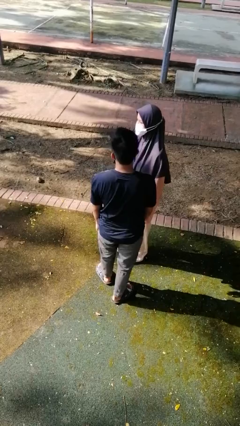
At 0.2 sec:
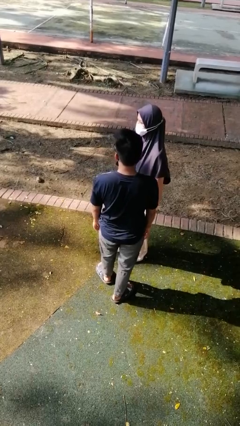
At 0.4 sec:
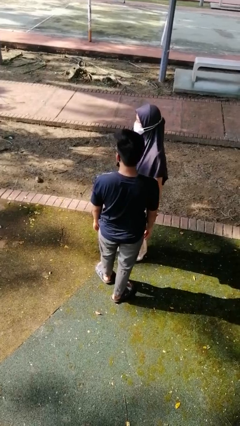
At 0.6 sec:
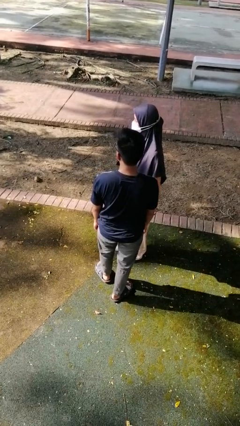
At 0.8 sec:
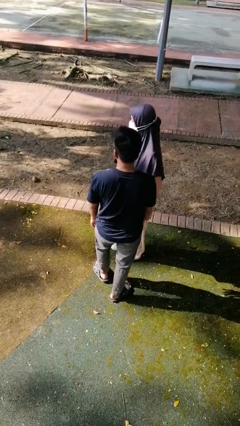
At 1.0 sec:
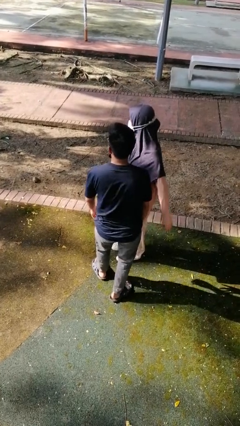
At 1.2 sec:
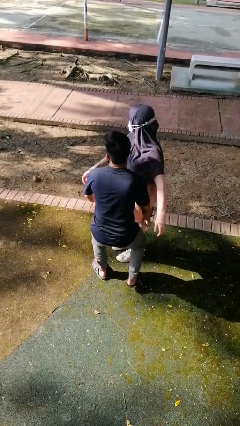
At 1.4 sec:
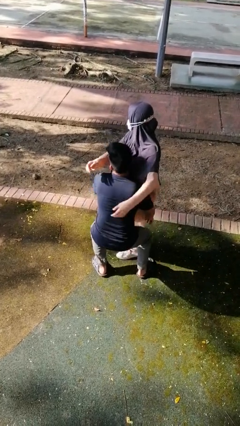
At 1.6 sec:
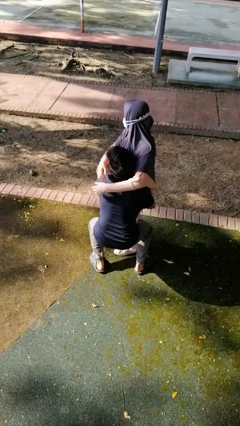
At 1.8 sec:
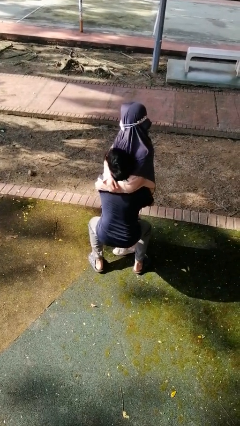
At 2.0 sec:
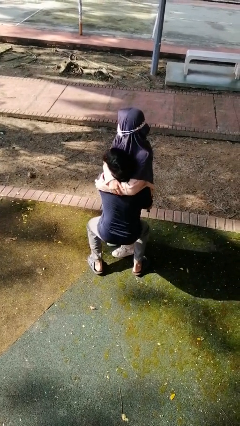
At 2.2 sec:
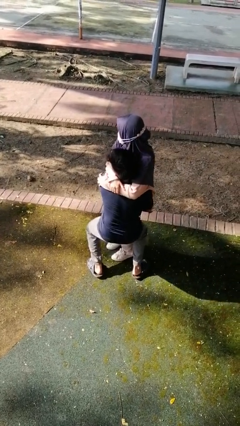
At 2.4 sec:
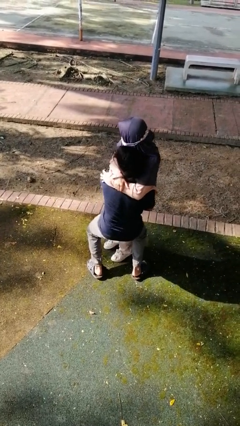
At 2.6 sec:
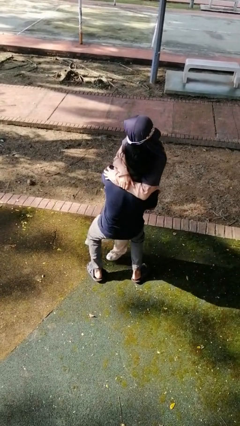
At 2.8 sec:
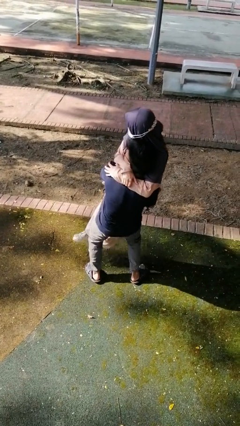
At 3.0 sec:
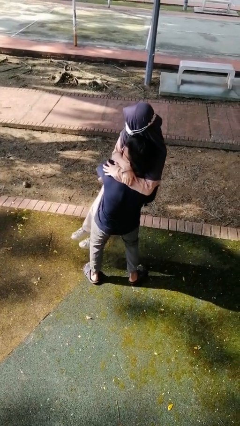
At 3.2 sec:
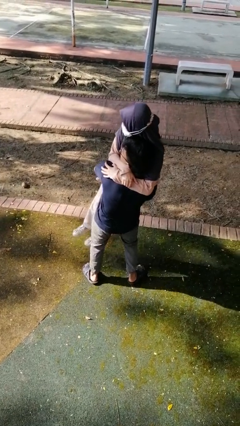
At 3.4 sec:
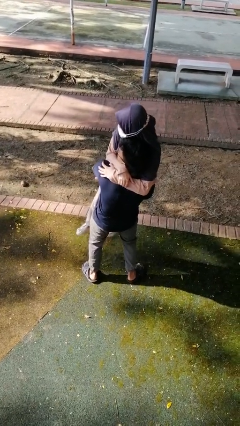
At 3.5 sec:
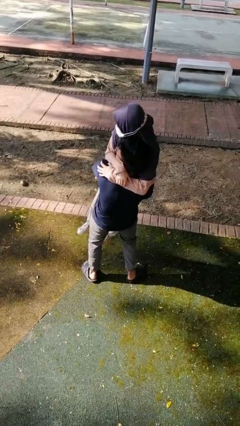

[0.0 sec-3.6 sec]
person picks up person

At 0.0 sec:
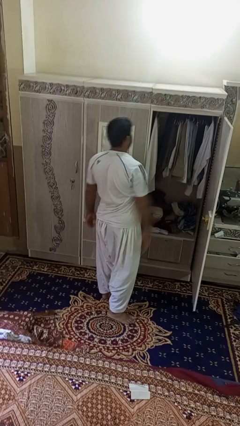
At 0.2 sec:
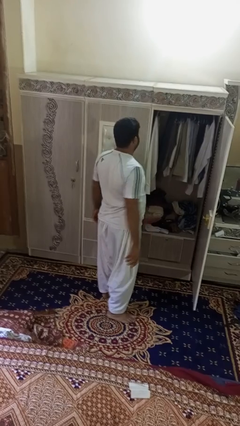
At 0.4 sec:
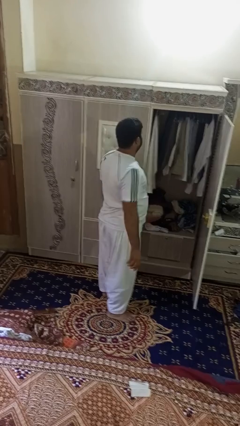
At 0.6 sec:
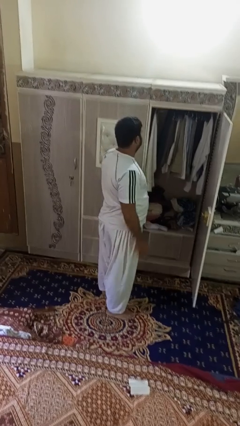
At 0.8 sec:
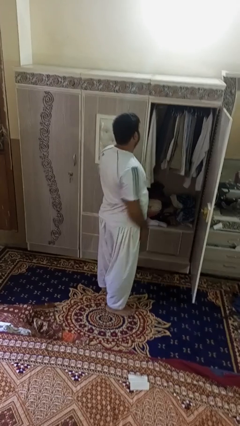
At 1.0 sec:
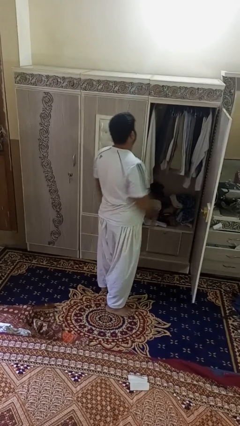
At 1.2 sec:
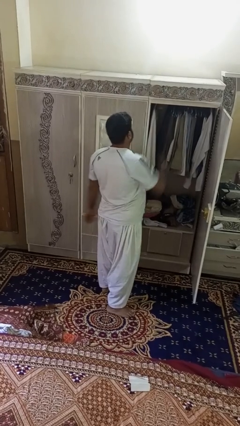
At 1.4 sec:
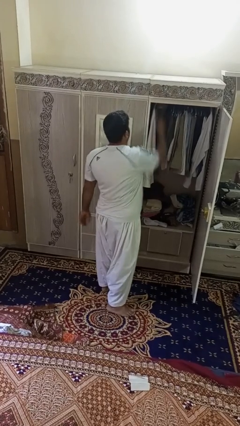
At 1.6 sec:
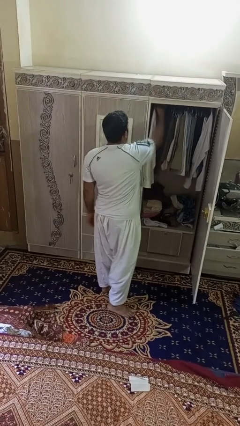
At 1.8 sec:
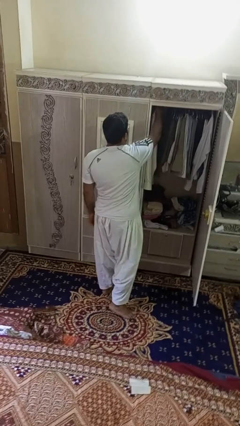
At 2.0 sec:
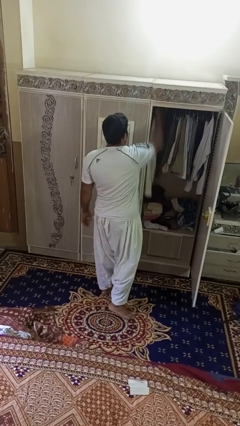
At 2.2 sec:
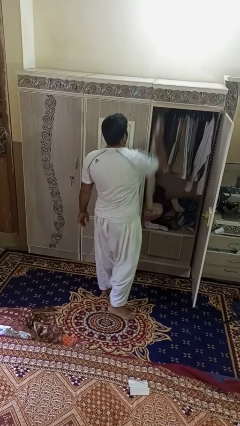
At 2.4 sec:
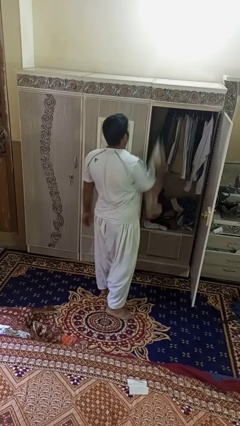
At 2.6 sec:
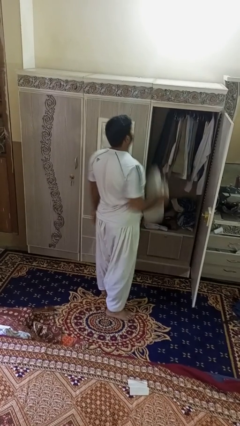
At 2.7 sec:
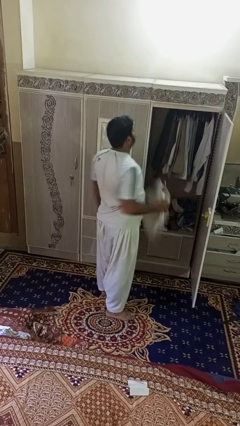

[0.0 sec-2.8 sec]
person takes clothes from closet

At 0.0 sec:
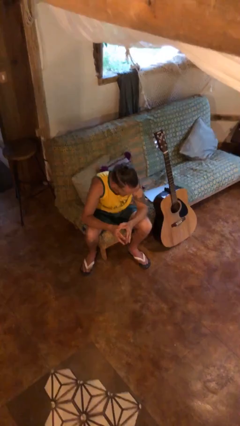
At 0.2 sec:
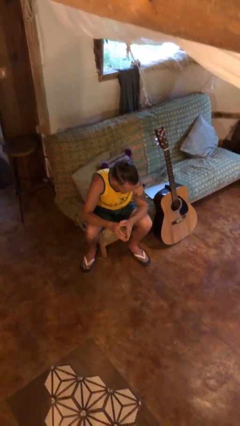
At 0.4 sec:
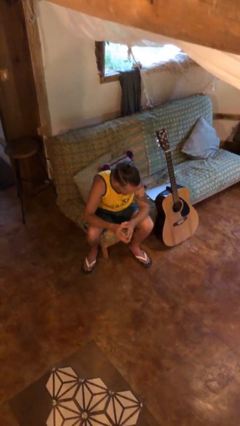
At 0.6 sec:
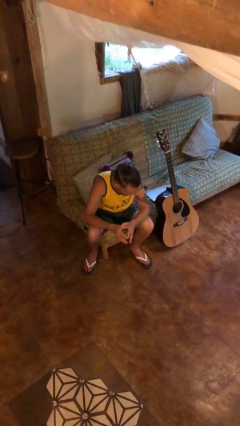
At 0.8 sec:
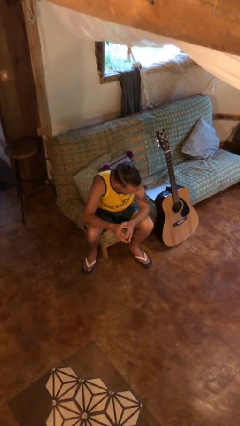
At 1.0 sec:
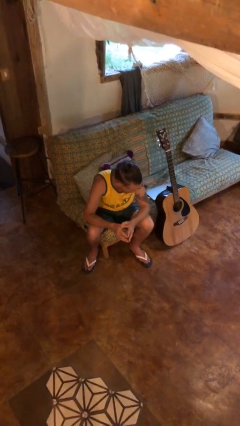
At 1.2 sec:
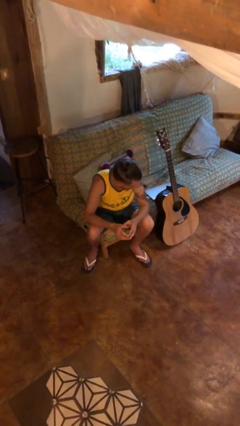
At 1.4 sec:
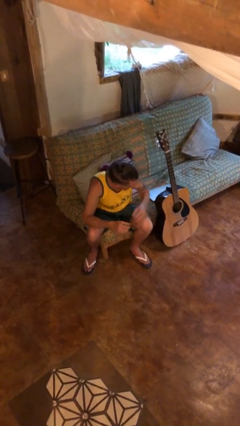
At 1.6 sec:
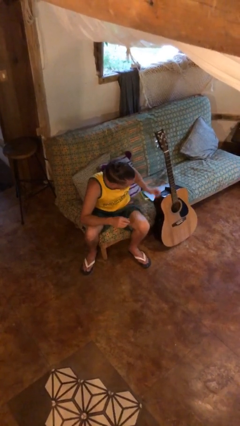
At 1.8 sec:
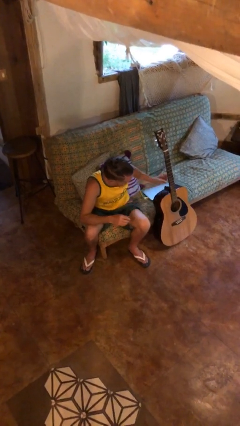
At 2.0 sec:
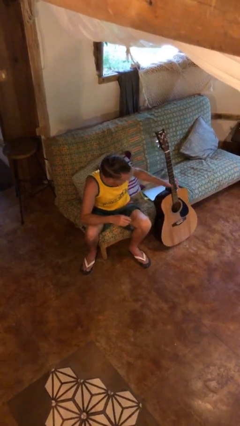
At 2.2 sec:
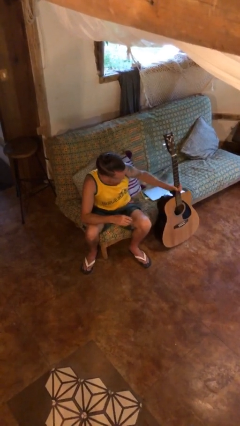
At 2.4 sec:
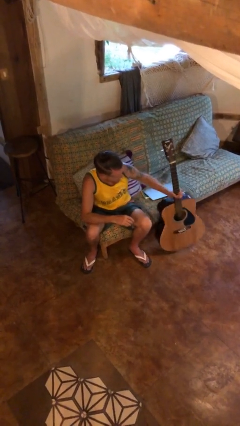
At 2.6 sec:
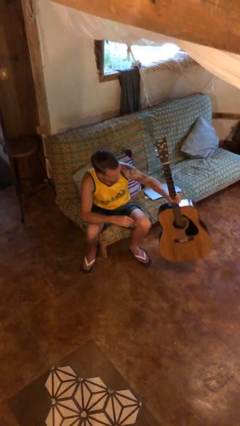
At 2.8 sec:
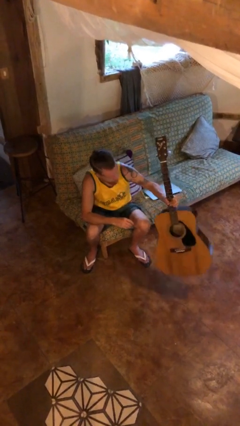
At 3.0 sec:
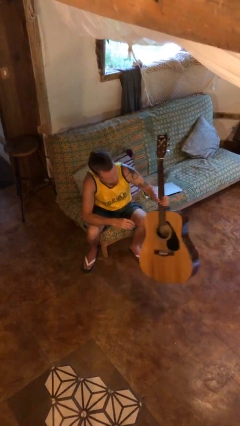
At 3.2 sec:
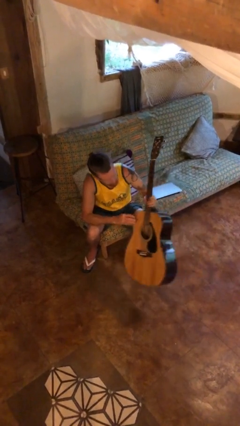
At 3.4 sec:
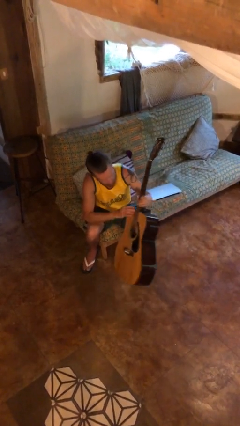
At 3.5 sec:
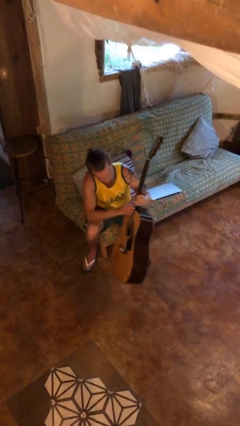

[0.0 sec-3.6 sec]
person picks up object from floor

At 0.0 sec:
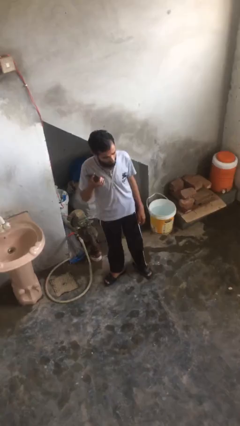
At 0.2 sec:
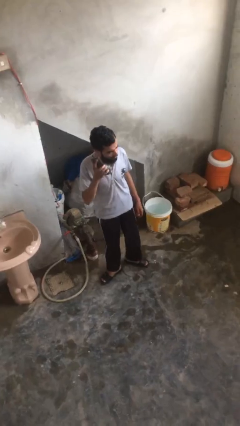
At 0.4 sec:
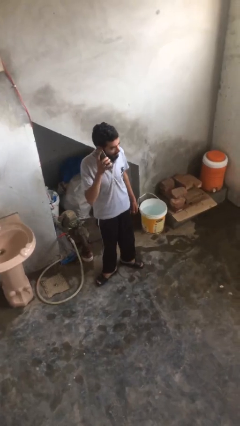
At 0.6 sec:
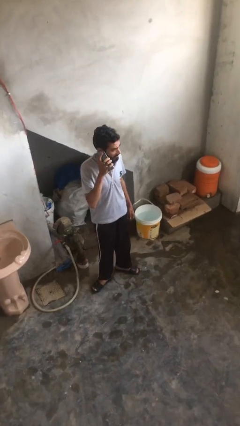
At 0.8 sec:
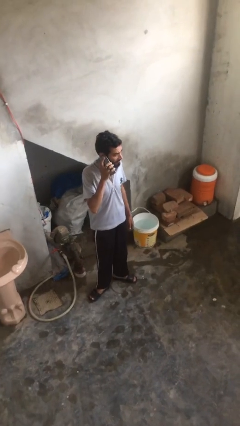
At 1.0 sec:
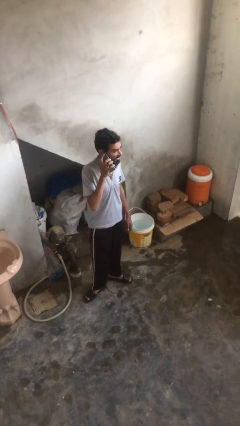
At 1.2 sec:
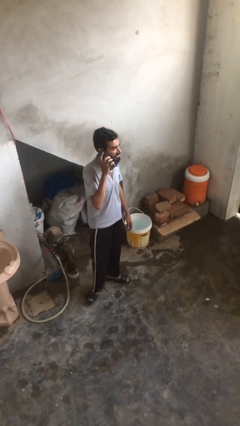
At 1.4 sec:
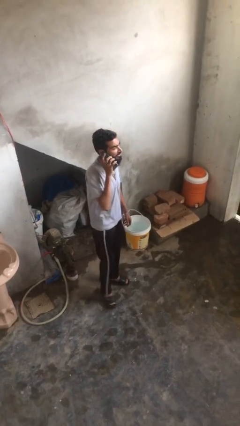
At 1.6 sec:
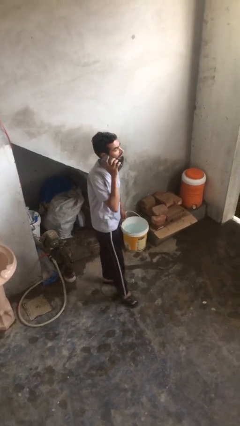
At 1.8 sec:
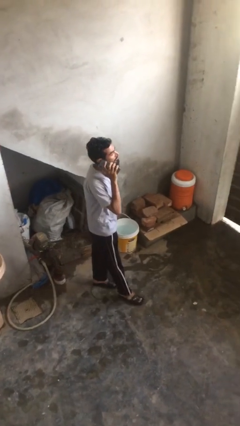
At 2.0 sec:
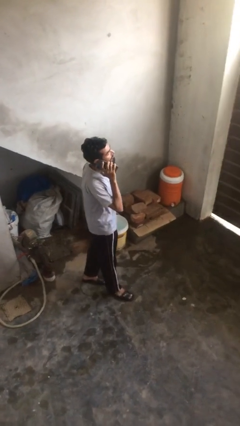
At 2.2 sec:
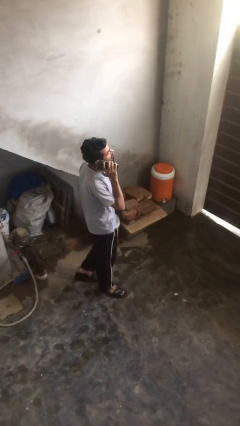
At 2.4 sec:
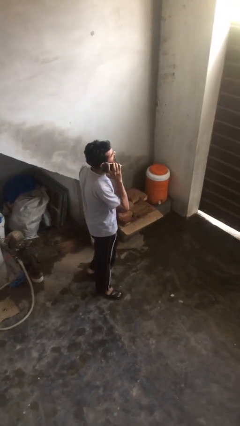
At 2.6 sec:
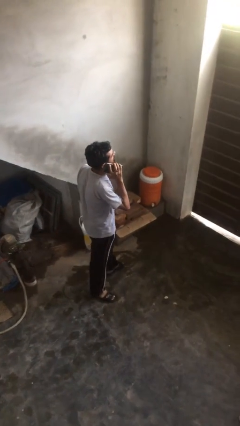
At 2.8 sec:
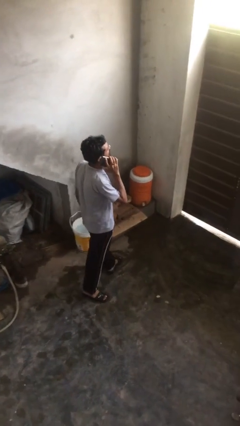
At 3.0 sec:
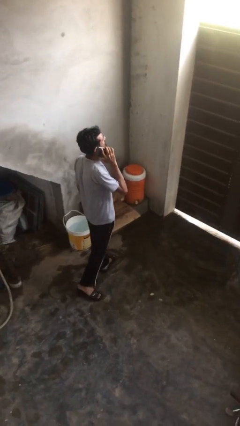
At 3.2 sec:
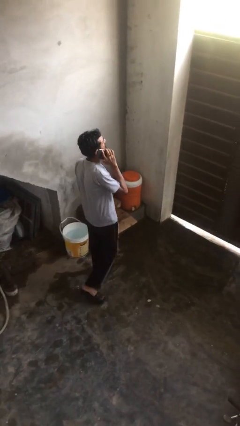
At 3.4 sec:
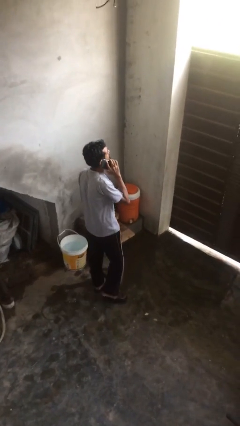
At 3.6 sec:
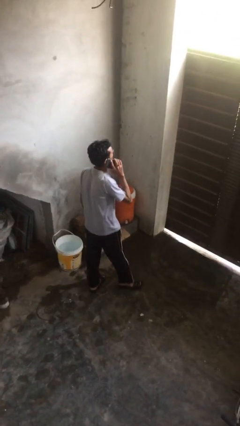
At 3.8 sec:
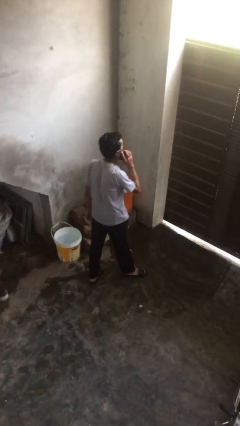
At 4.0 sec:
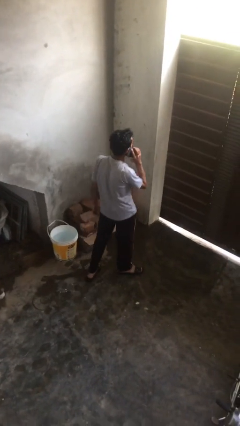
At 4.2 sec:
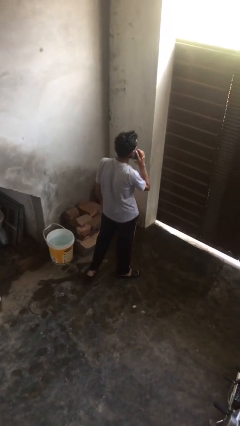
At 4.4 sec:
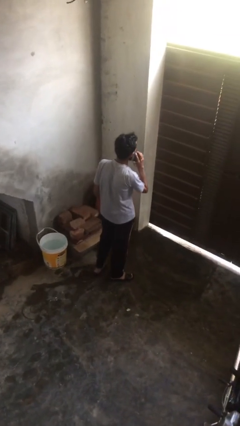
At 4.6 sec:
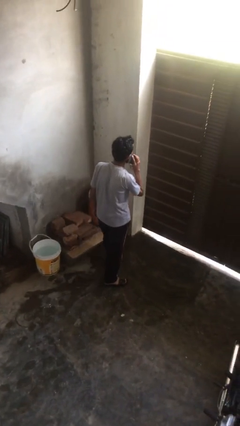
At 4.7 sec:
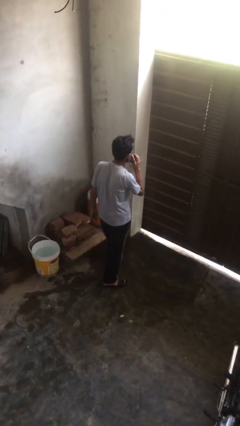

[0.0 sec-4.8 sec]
person talks on phone

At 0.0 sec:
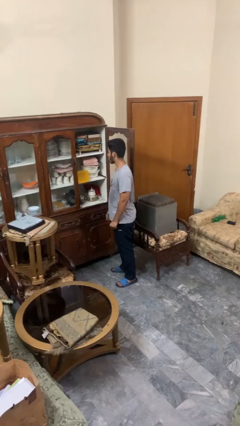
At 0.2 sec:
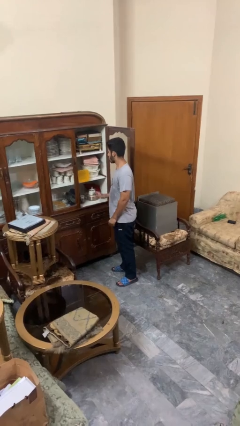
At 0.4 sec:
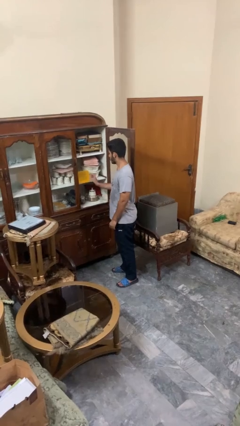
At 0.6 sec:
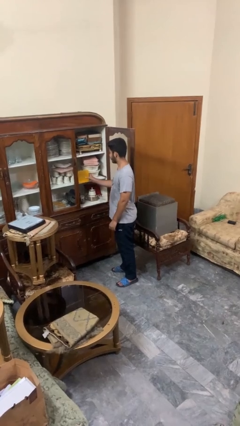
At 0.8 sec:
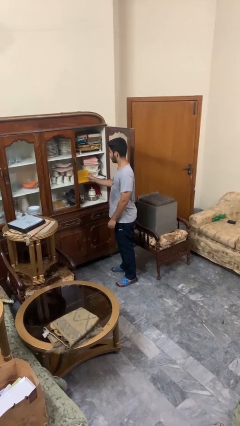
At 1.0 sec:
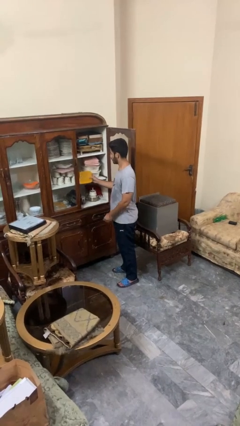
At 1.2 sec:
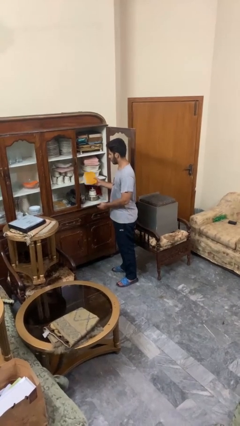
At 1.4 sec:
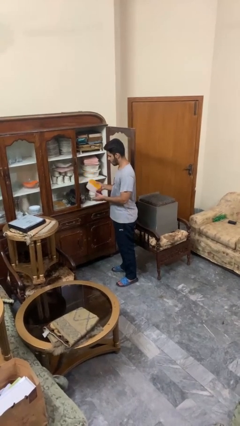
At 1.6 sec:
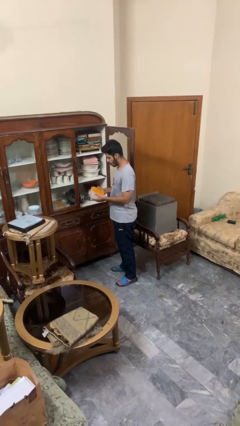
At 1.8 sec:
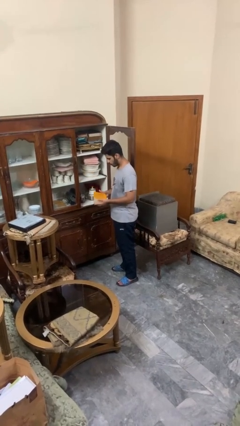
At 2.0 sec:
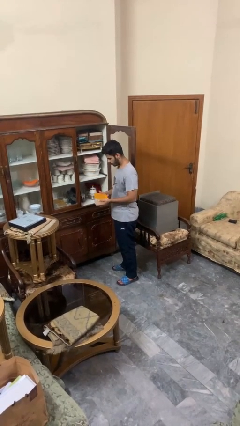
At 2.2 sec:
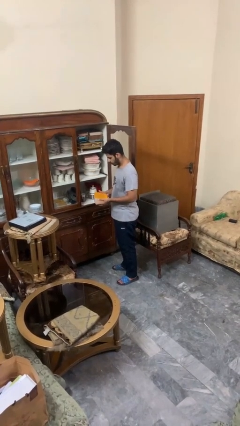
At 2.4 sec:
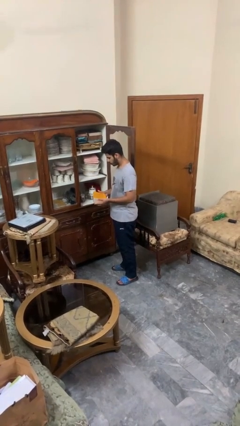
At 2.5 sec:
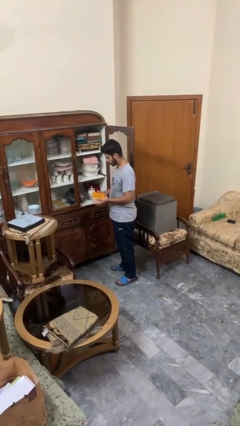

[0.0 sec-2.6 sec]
person picks up object from cabinet
